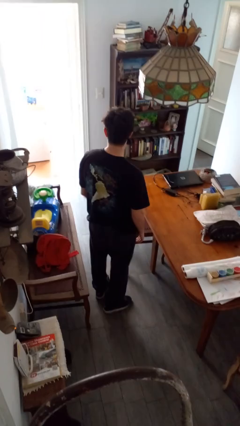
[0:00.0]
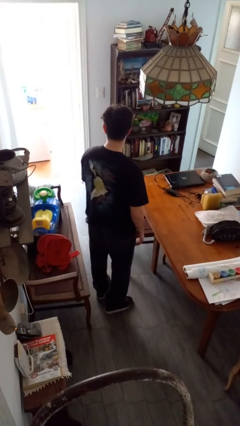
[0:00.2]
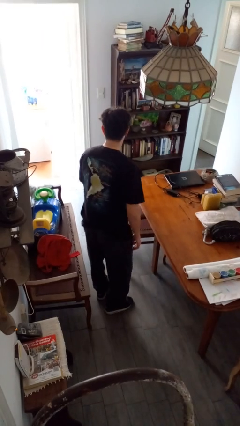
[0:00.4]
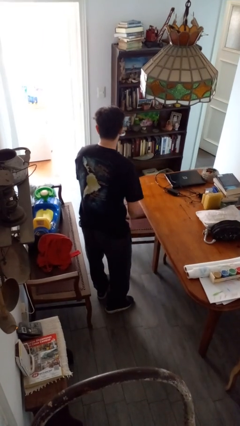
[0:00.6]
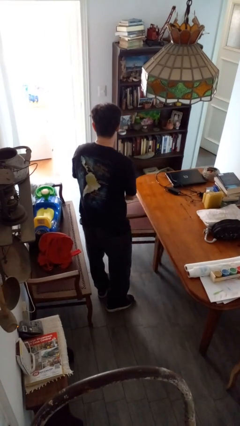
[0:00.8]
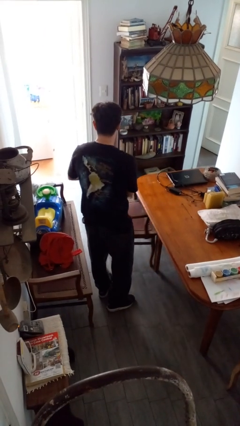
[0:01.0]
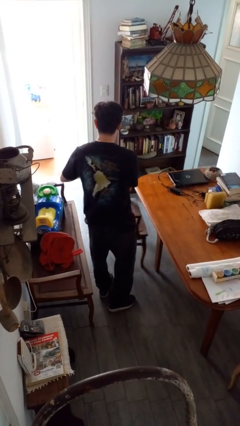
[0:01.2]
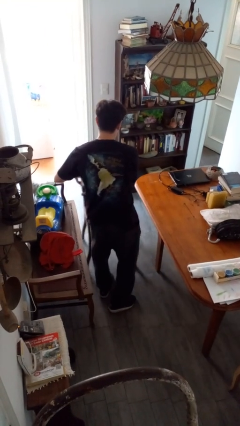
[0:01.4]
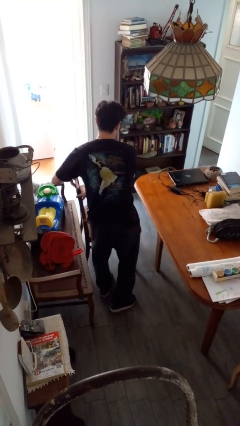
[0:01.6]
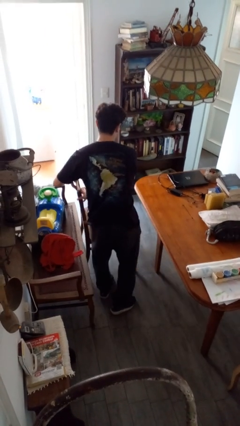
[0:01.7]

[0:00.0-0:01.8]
person pulls out chair

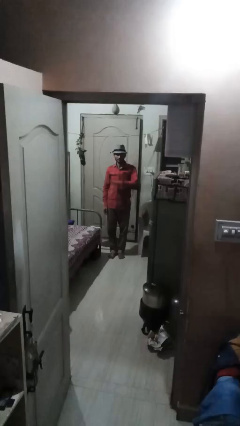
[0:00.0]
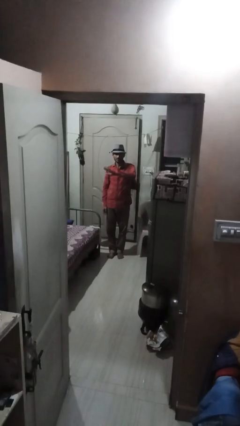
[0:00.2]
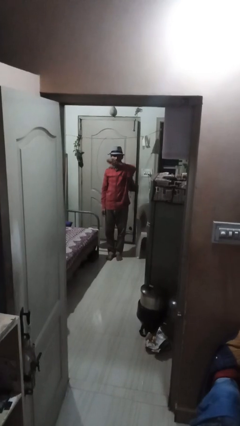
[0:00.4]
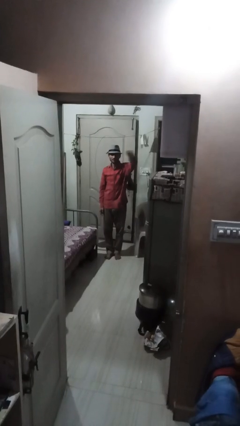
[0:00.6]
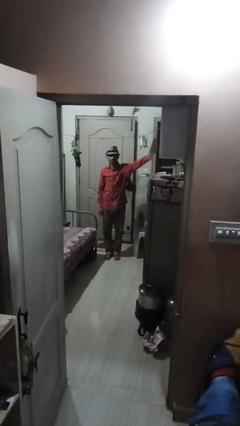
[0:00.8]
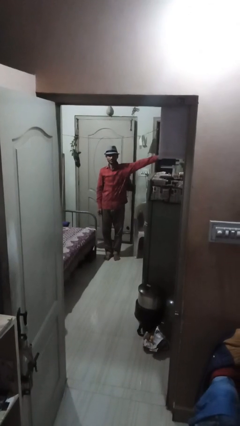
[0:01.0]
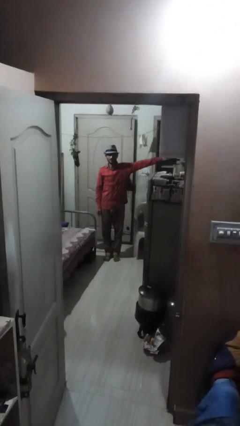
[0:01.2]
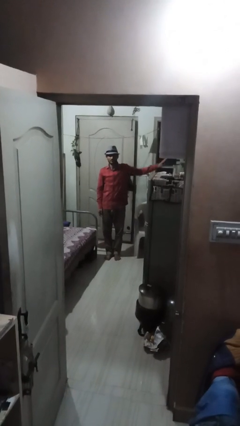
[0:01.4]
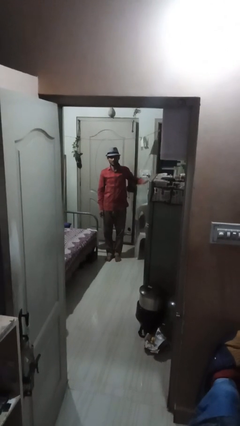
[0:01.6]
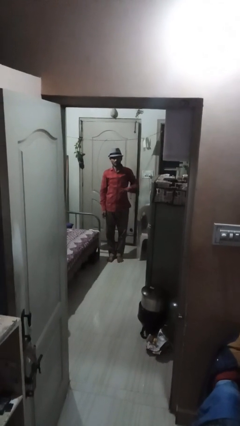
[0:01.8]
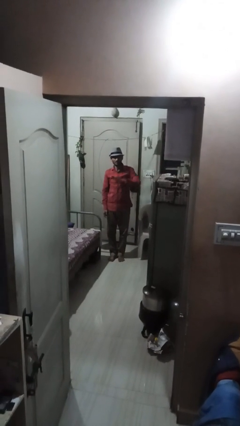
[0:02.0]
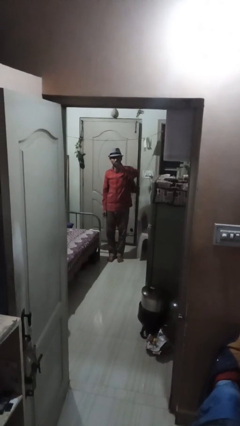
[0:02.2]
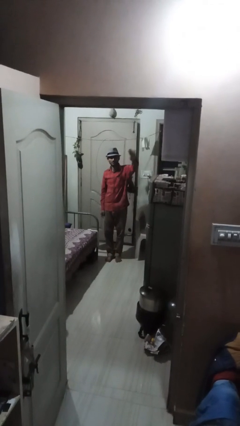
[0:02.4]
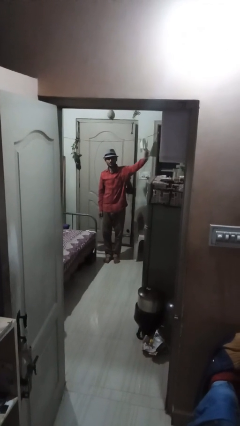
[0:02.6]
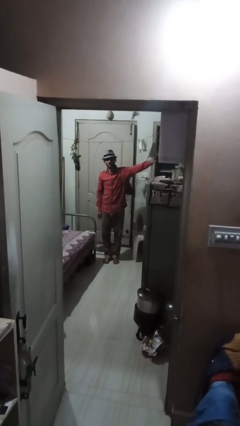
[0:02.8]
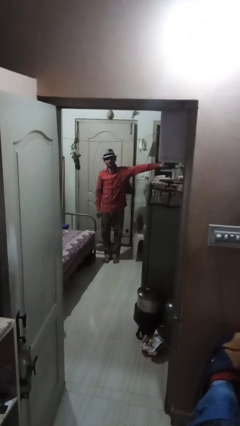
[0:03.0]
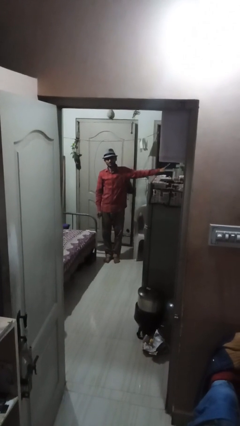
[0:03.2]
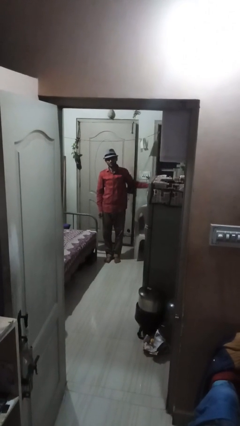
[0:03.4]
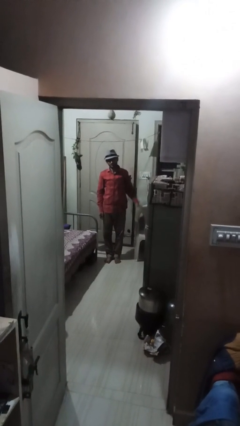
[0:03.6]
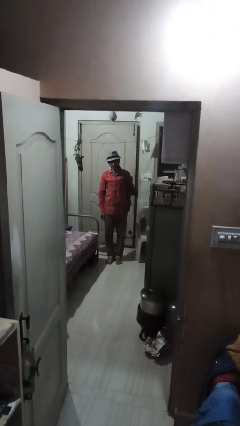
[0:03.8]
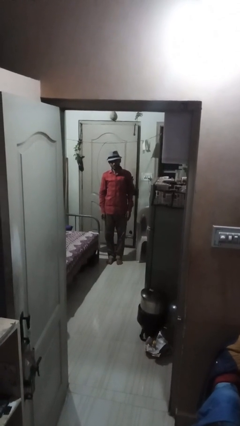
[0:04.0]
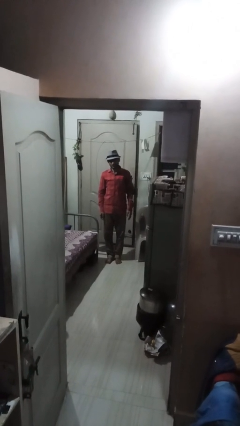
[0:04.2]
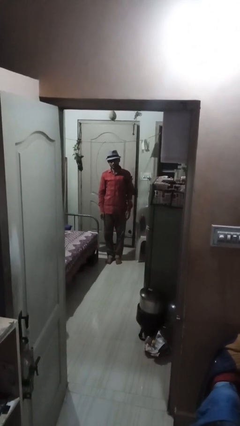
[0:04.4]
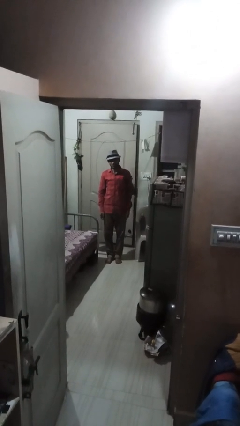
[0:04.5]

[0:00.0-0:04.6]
person gestures swipe left

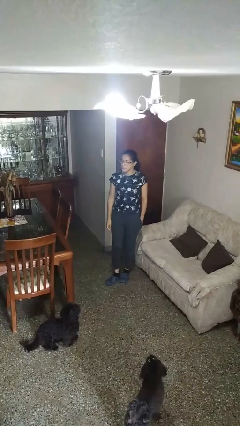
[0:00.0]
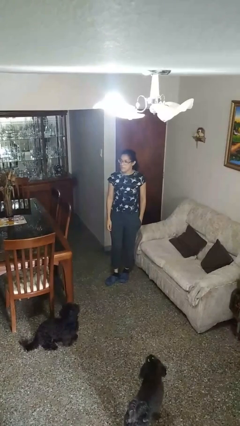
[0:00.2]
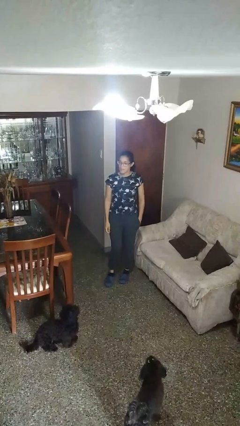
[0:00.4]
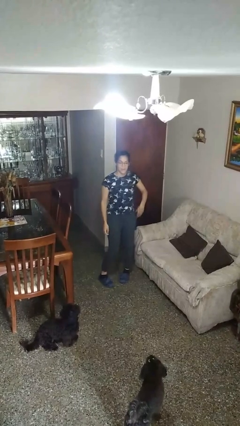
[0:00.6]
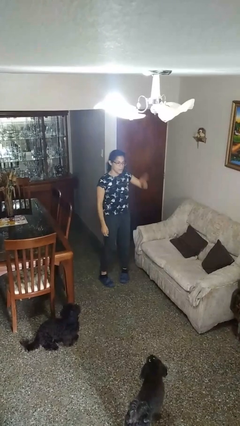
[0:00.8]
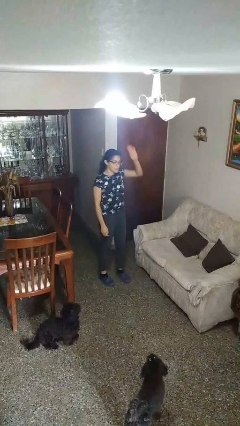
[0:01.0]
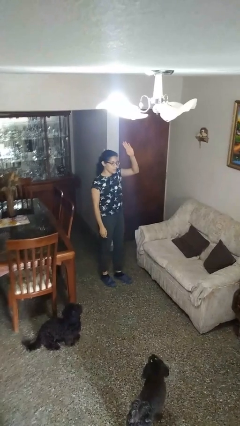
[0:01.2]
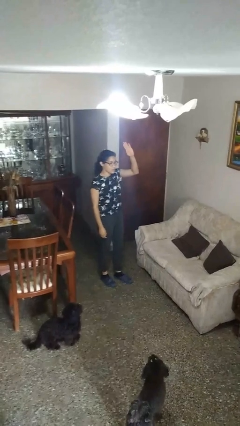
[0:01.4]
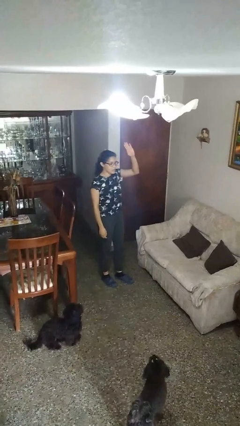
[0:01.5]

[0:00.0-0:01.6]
person gestures lower hand

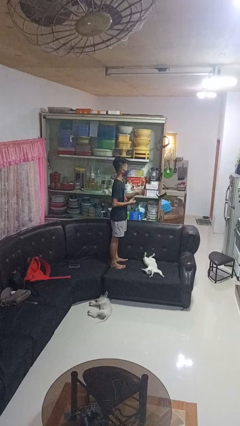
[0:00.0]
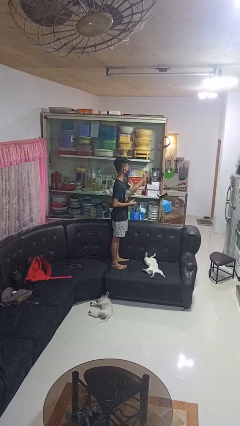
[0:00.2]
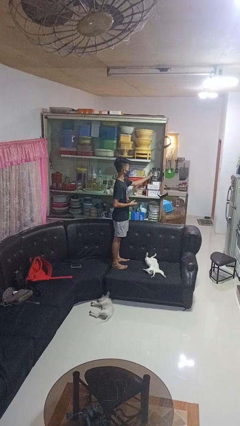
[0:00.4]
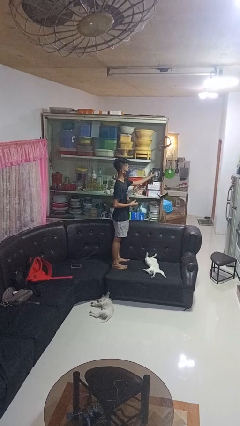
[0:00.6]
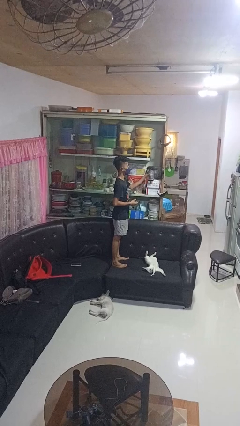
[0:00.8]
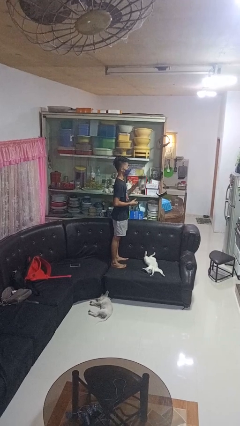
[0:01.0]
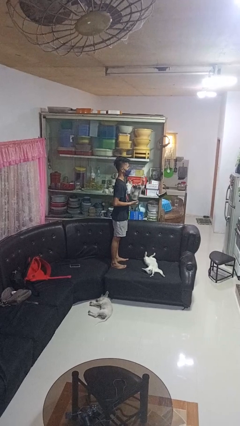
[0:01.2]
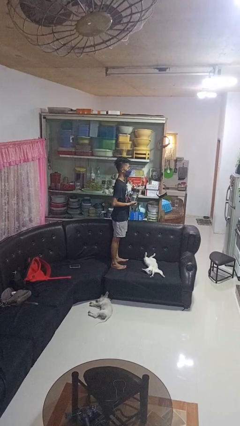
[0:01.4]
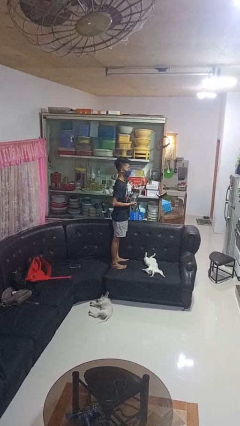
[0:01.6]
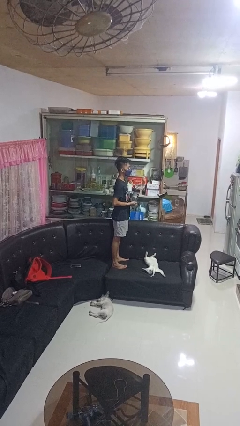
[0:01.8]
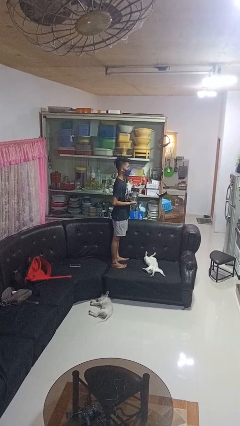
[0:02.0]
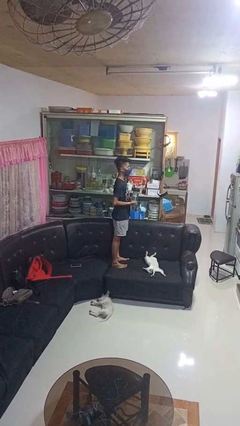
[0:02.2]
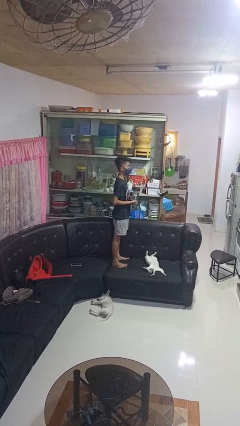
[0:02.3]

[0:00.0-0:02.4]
person picks up object from cabinet

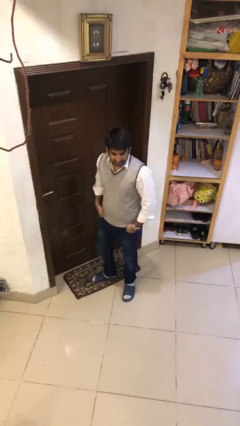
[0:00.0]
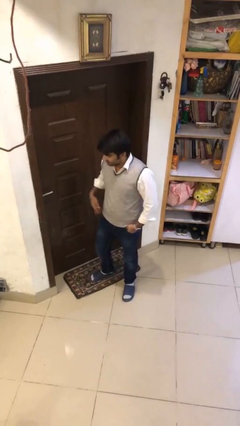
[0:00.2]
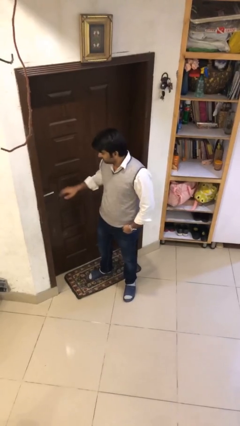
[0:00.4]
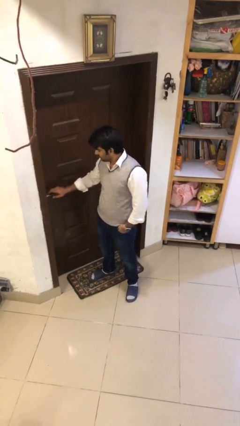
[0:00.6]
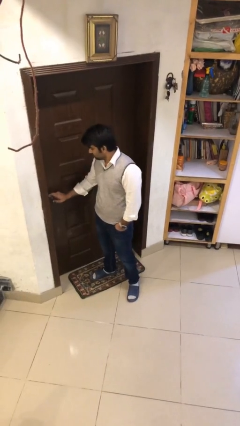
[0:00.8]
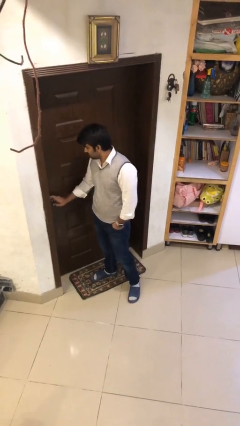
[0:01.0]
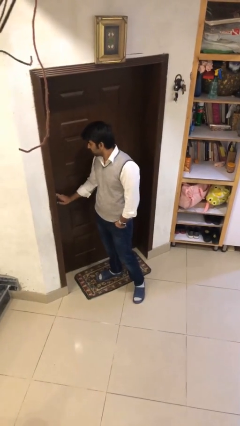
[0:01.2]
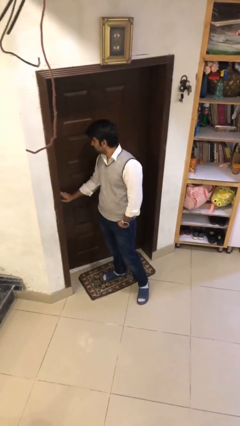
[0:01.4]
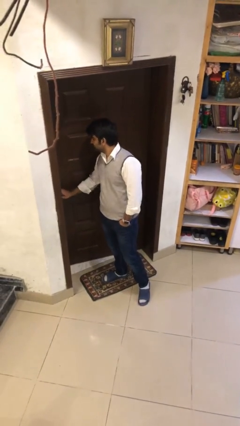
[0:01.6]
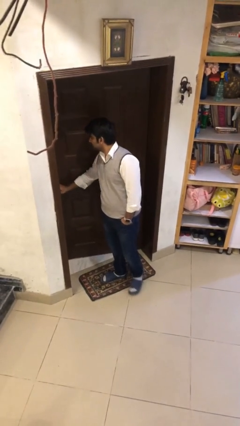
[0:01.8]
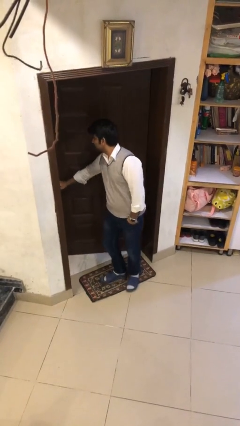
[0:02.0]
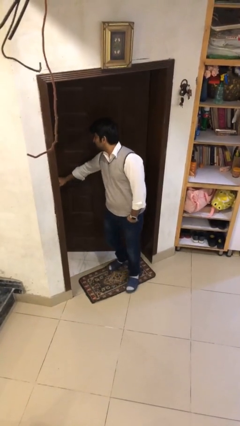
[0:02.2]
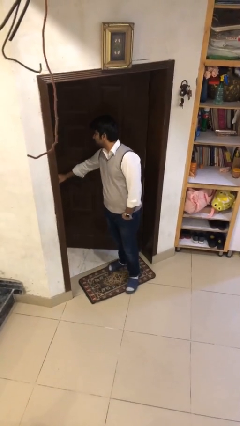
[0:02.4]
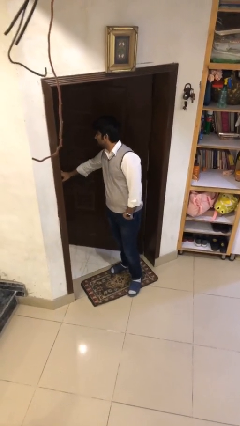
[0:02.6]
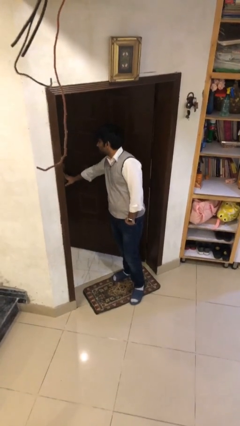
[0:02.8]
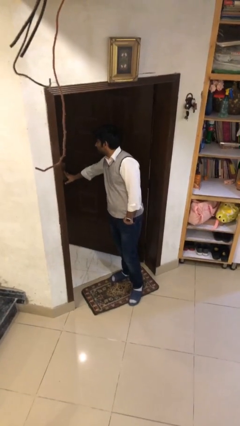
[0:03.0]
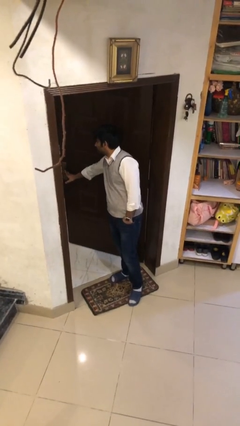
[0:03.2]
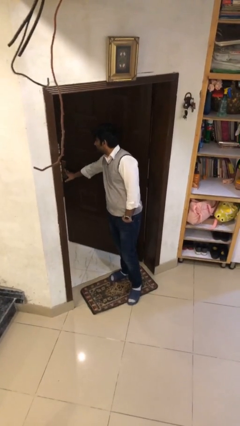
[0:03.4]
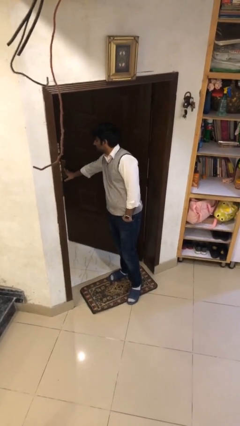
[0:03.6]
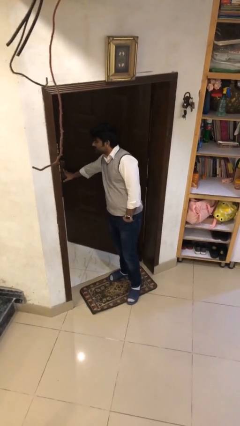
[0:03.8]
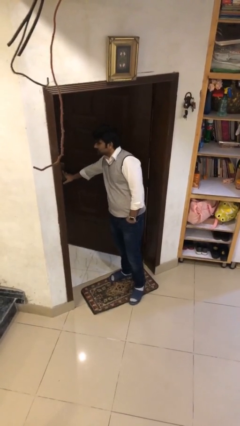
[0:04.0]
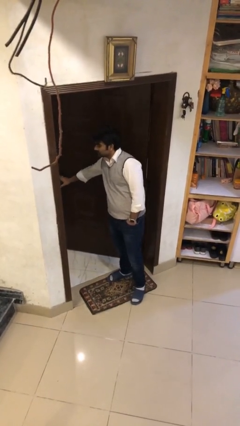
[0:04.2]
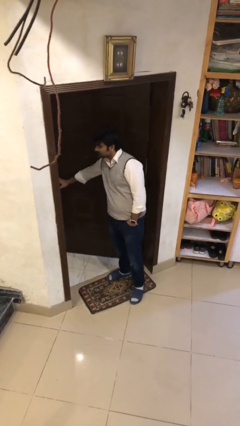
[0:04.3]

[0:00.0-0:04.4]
person opens facility door

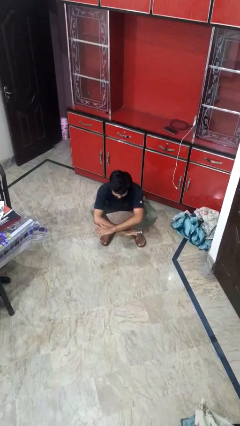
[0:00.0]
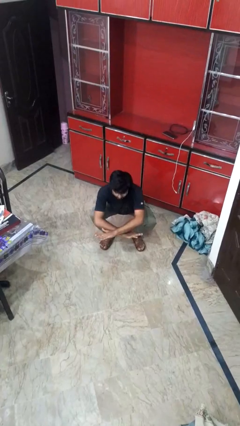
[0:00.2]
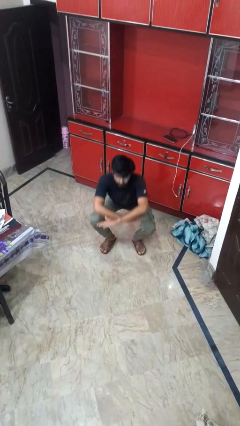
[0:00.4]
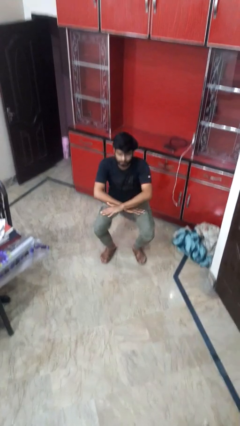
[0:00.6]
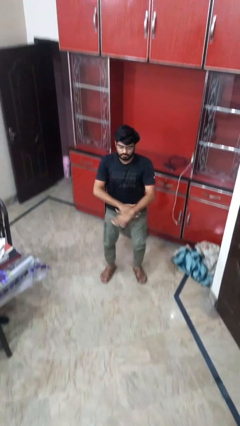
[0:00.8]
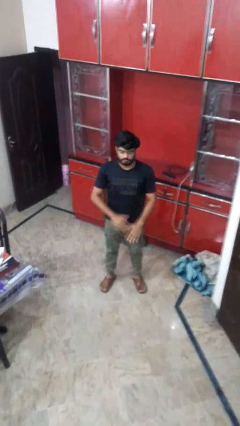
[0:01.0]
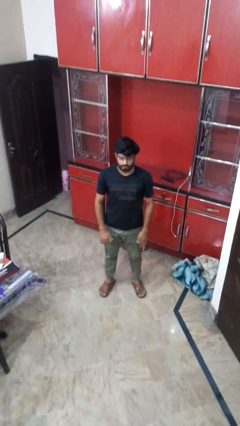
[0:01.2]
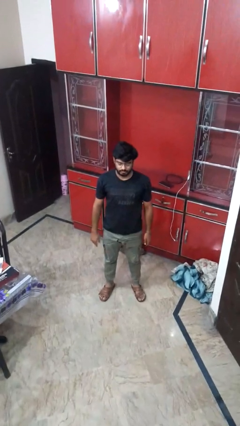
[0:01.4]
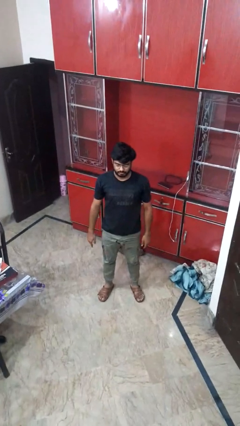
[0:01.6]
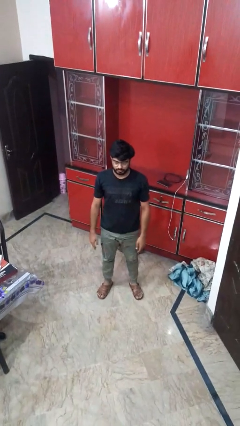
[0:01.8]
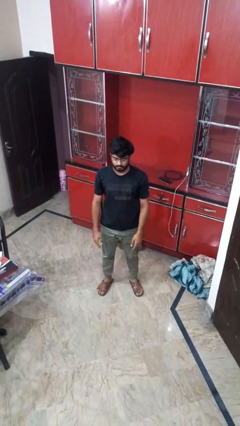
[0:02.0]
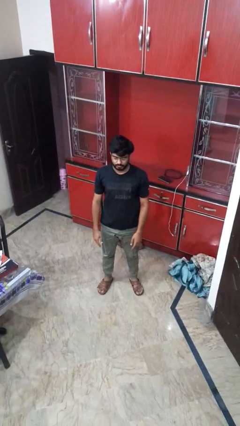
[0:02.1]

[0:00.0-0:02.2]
person stands up

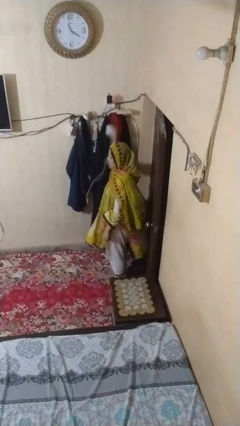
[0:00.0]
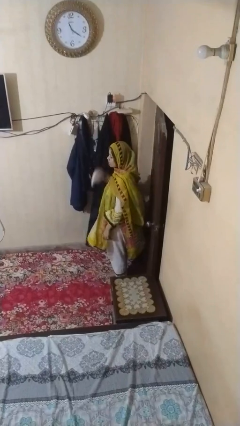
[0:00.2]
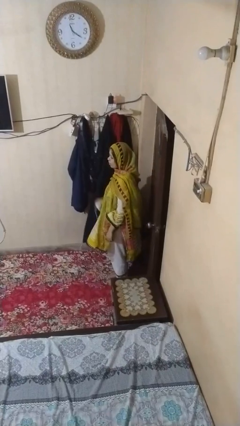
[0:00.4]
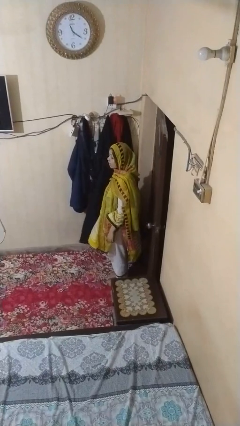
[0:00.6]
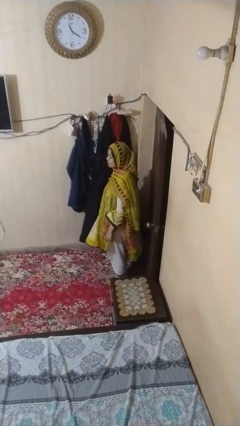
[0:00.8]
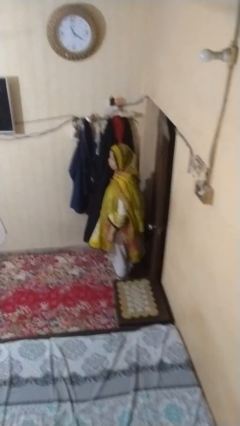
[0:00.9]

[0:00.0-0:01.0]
person unplugs from electrical socket
